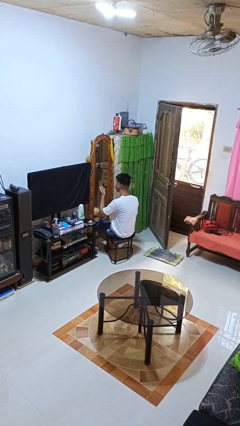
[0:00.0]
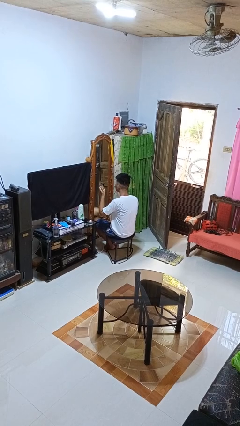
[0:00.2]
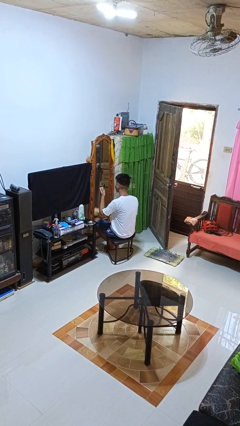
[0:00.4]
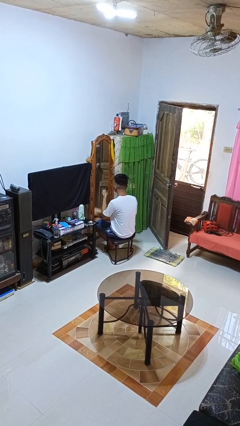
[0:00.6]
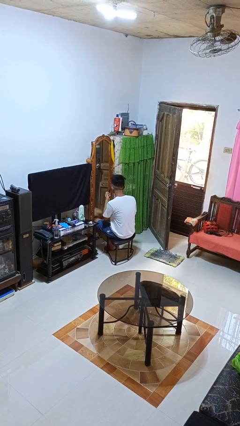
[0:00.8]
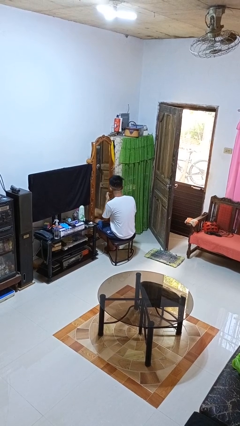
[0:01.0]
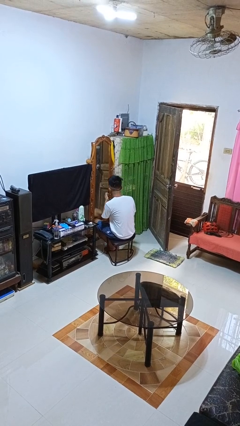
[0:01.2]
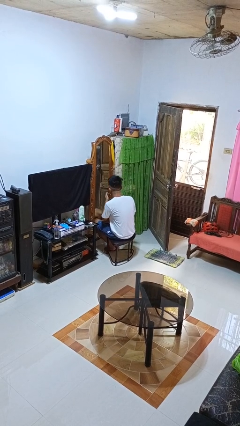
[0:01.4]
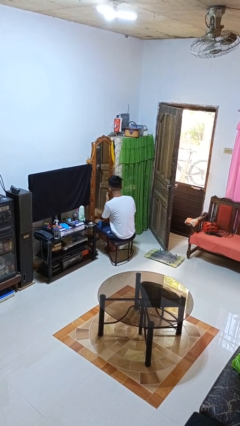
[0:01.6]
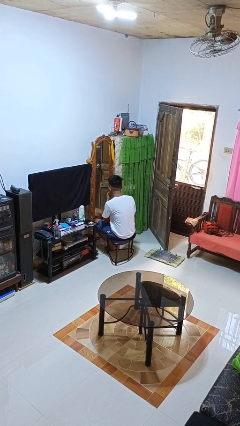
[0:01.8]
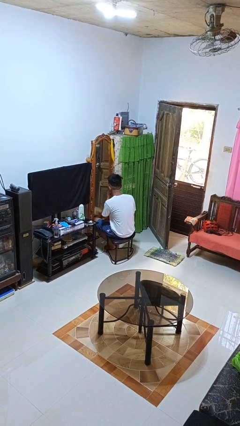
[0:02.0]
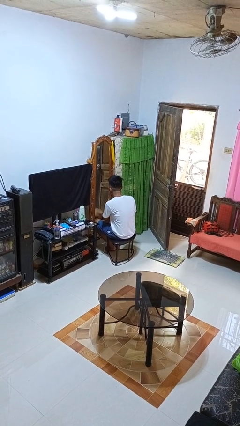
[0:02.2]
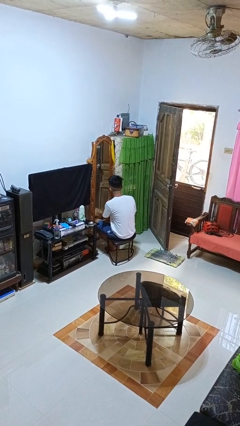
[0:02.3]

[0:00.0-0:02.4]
person applies lip makeup

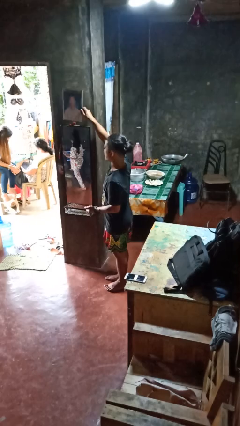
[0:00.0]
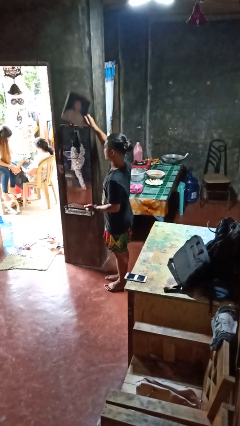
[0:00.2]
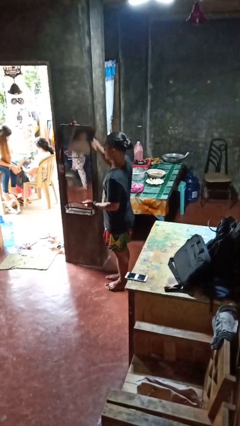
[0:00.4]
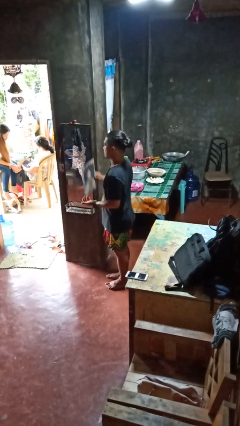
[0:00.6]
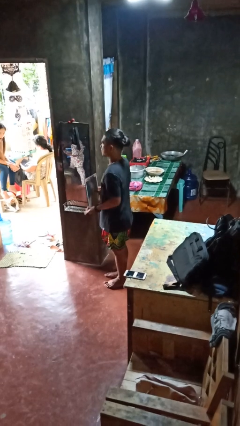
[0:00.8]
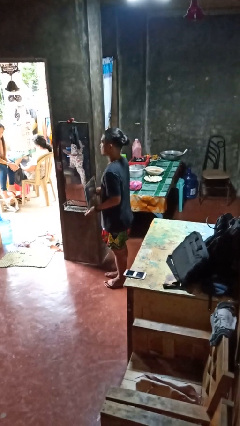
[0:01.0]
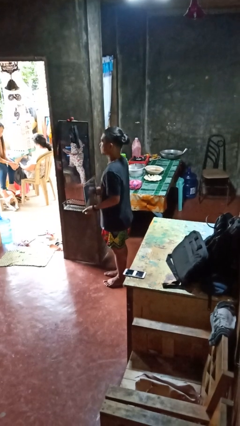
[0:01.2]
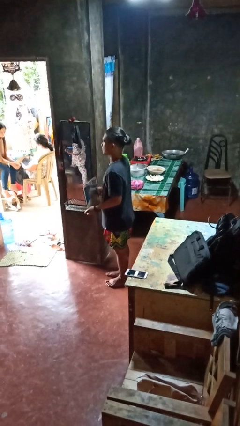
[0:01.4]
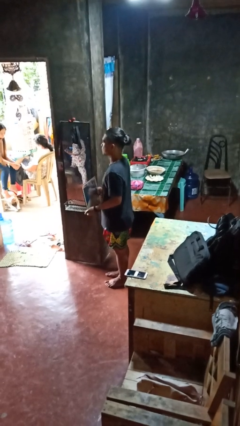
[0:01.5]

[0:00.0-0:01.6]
person takes down picture frame

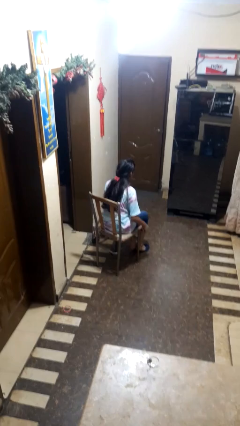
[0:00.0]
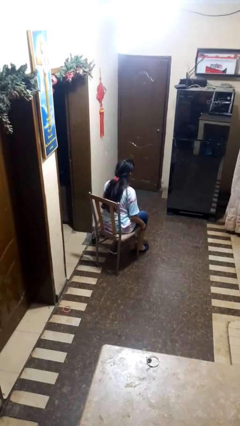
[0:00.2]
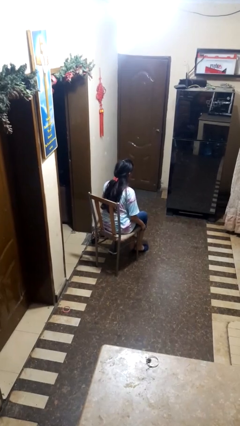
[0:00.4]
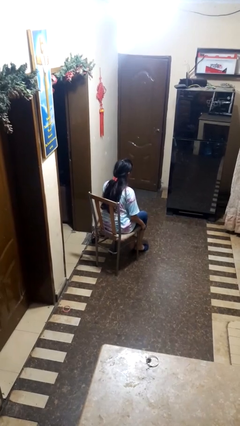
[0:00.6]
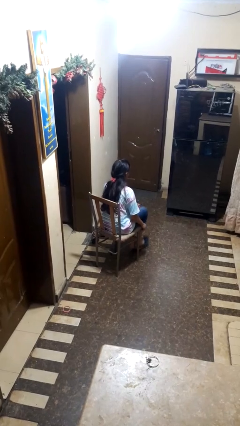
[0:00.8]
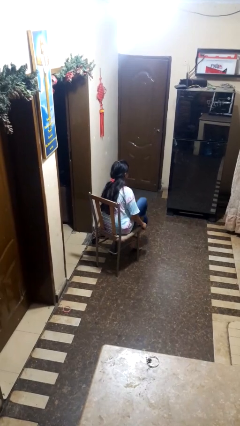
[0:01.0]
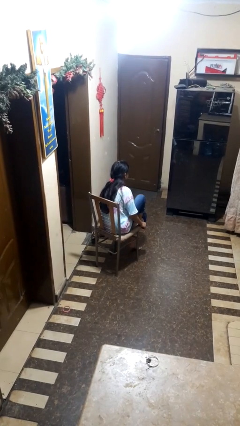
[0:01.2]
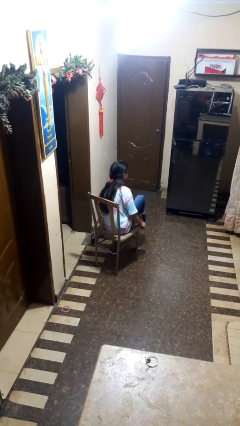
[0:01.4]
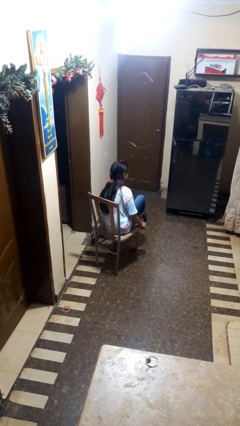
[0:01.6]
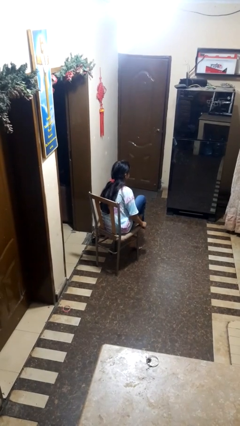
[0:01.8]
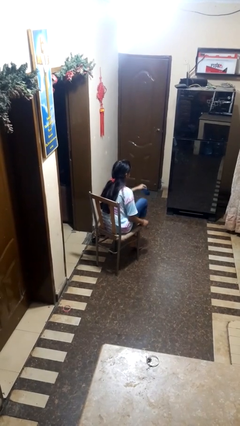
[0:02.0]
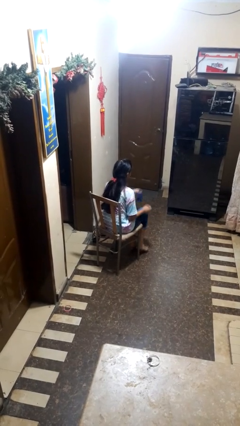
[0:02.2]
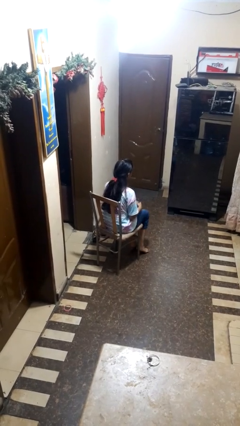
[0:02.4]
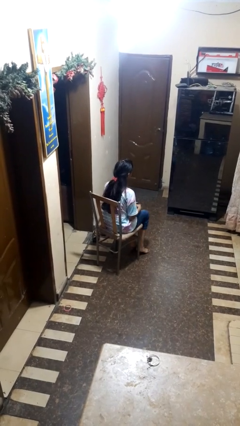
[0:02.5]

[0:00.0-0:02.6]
person takes off socks

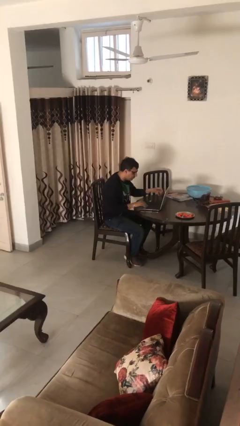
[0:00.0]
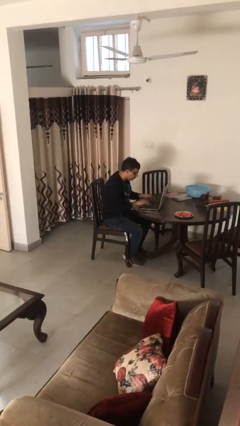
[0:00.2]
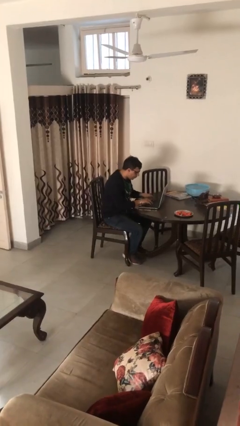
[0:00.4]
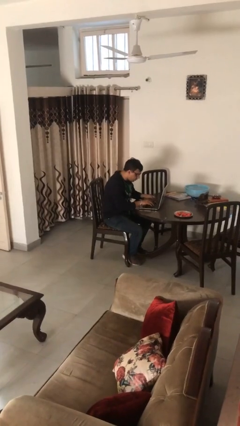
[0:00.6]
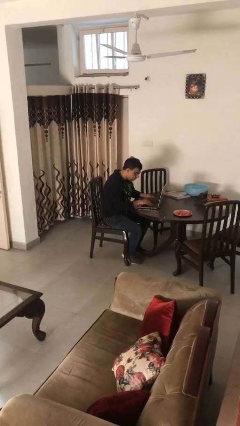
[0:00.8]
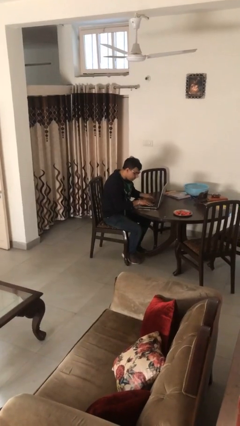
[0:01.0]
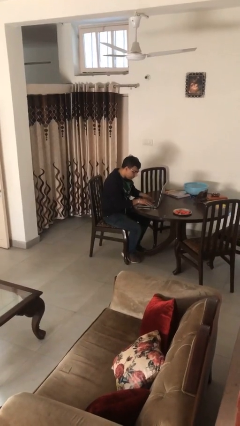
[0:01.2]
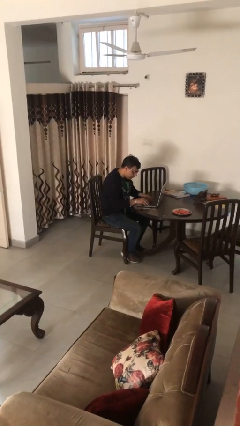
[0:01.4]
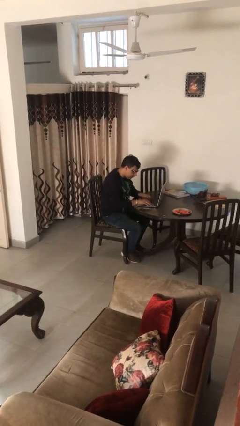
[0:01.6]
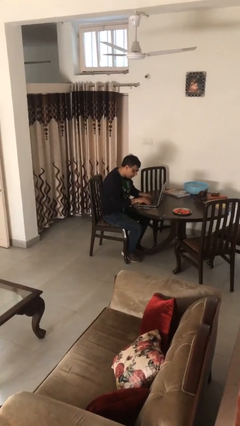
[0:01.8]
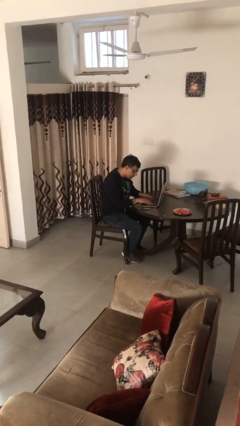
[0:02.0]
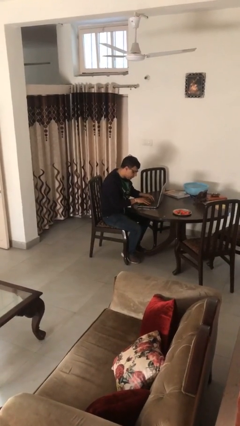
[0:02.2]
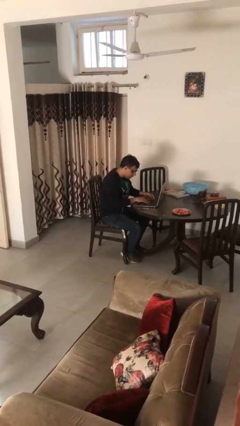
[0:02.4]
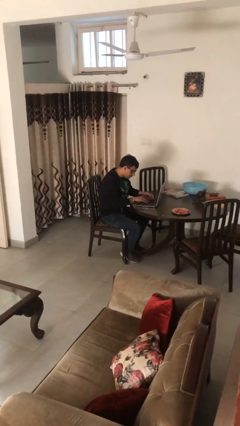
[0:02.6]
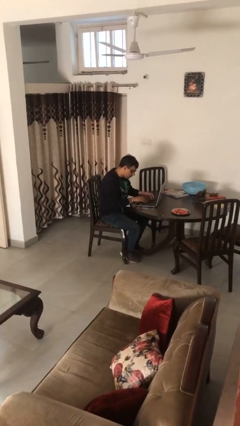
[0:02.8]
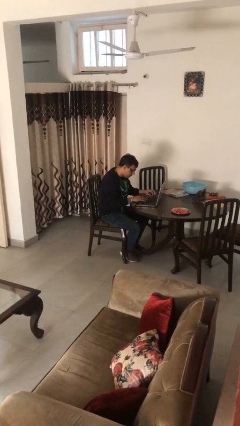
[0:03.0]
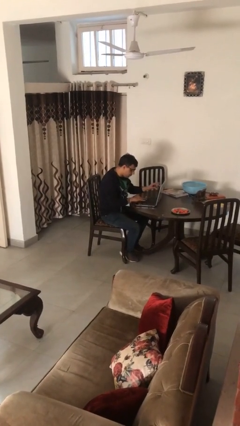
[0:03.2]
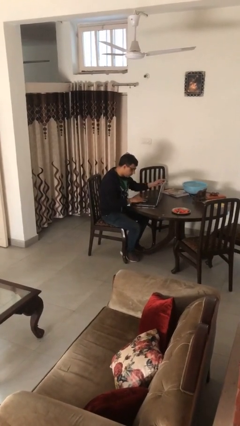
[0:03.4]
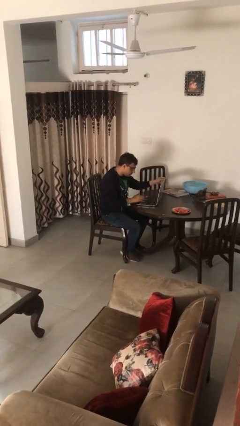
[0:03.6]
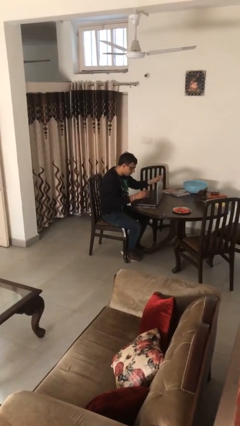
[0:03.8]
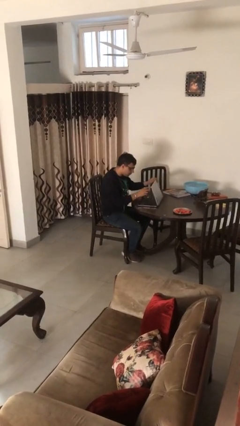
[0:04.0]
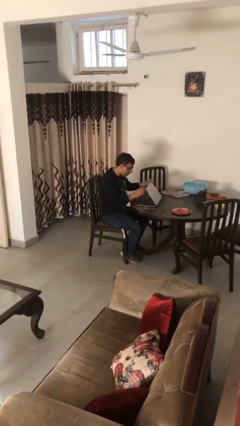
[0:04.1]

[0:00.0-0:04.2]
person interacts with laptop

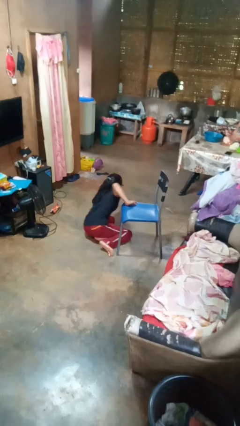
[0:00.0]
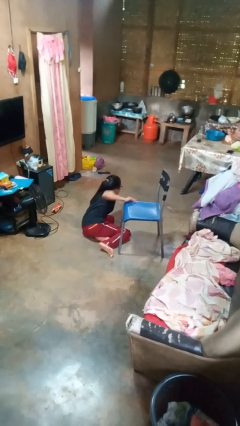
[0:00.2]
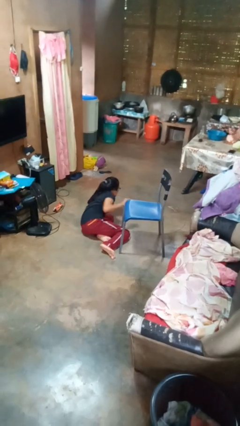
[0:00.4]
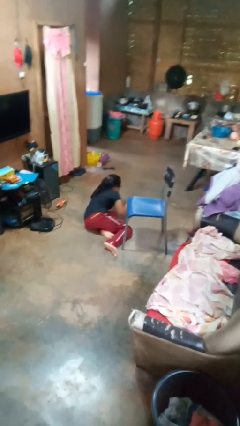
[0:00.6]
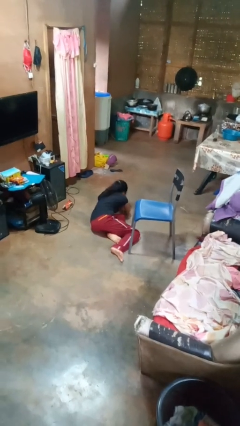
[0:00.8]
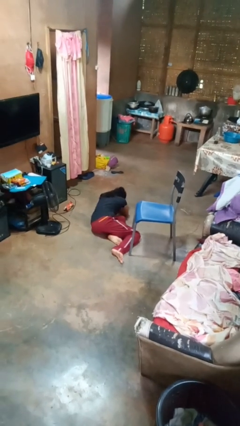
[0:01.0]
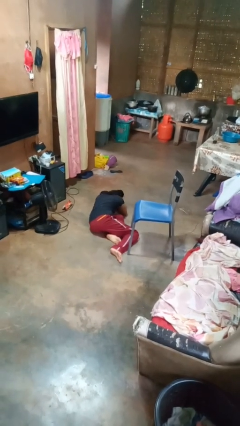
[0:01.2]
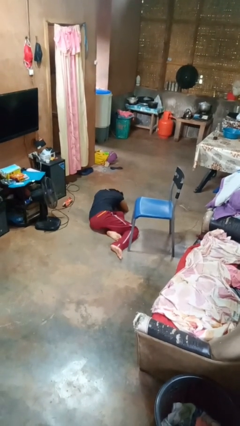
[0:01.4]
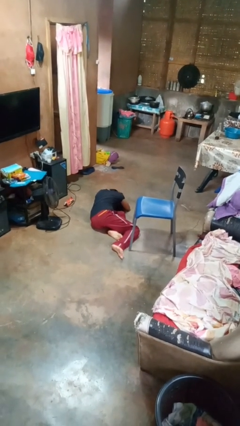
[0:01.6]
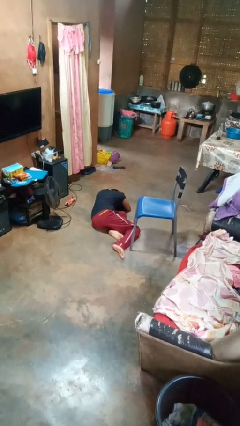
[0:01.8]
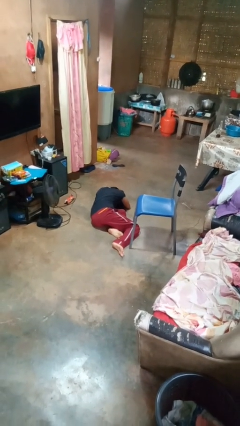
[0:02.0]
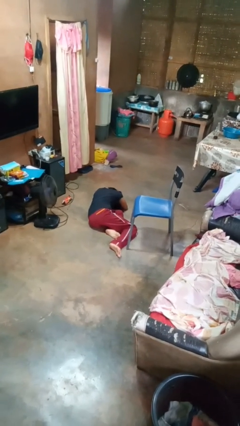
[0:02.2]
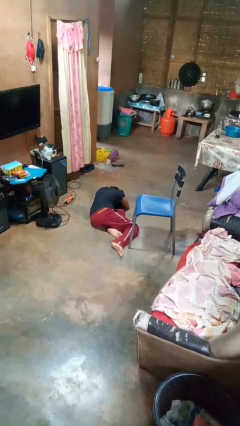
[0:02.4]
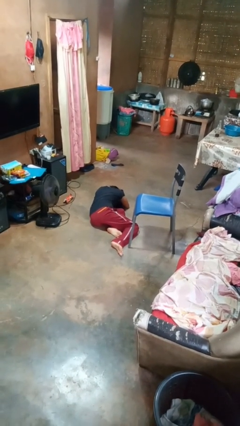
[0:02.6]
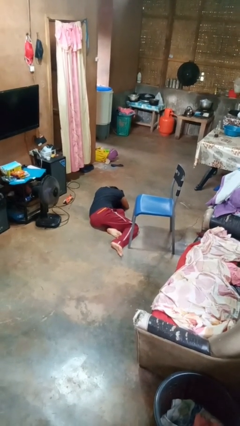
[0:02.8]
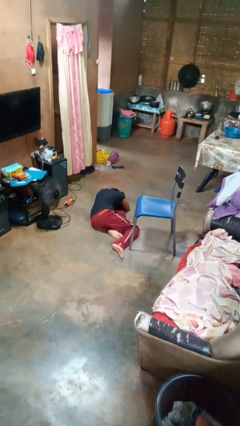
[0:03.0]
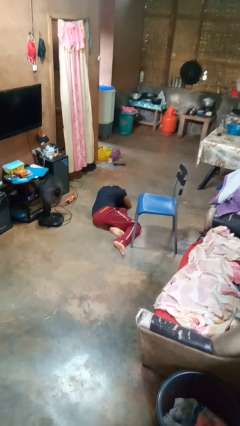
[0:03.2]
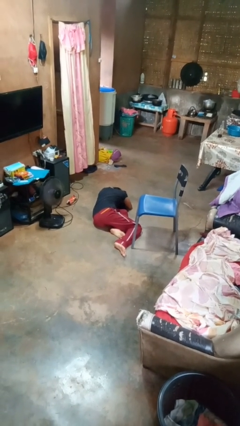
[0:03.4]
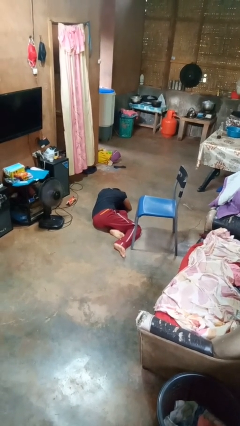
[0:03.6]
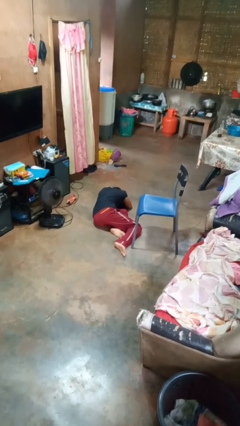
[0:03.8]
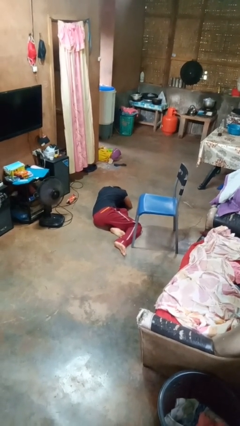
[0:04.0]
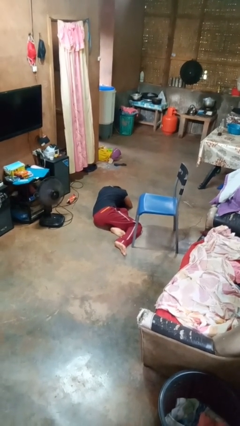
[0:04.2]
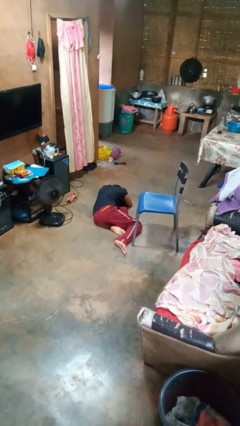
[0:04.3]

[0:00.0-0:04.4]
person lies down on floor

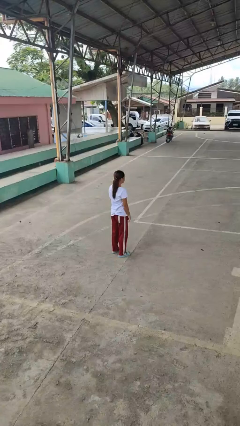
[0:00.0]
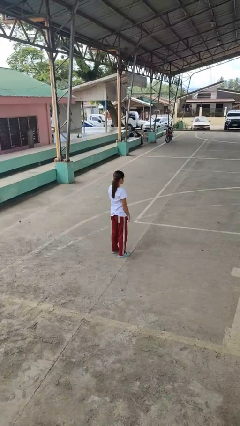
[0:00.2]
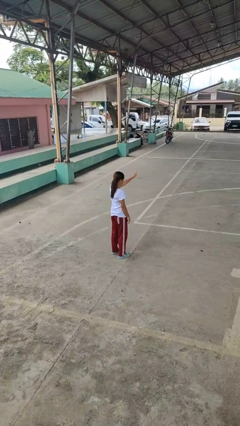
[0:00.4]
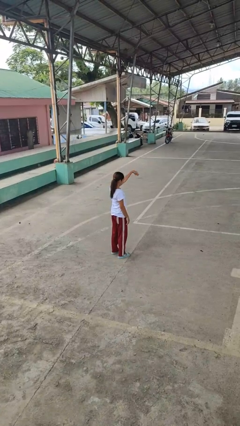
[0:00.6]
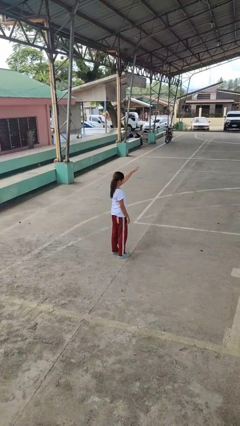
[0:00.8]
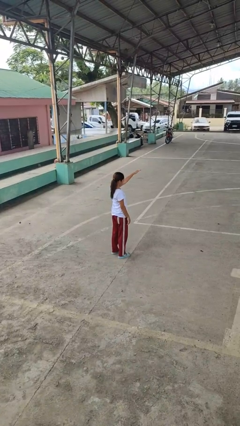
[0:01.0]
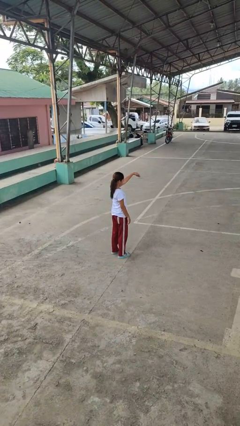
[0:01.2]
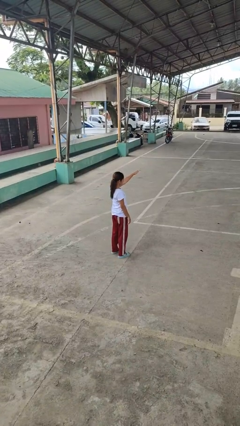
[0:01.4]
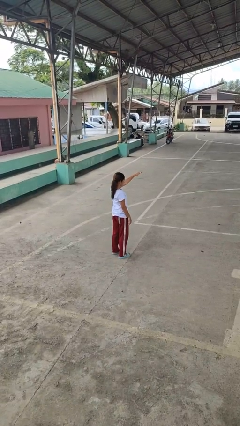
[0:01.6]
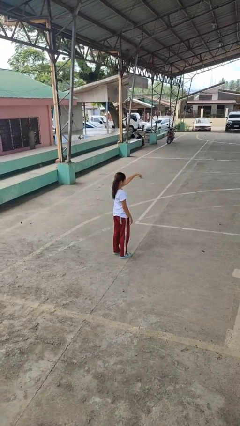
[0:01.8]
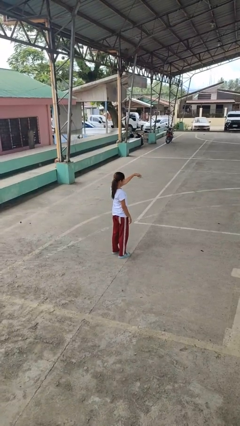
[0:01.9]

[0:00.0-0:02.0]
person gestures come here

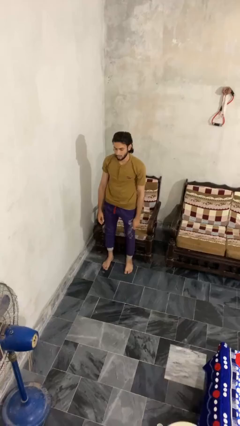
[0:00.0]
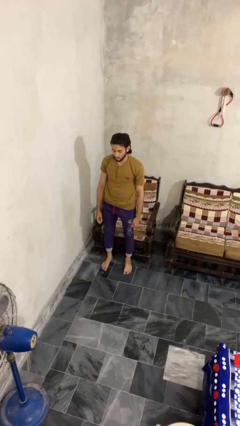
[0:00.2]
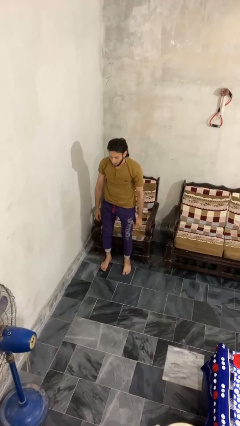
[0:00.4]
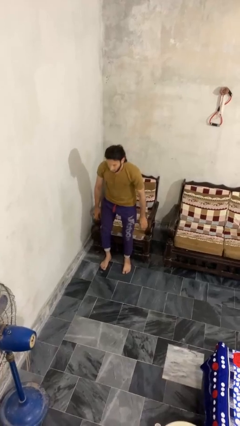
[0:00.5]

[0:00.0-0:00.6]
person sits down
